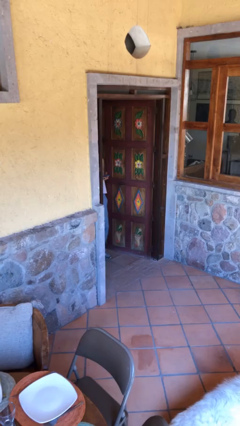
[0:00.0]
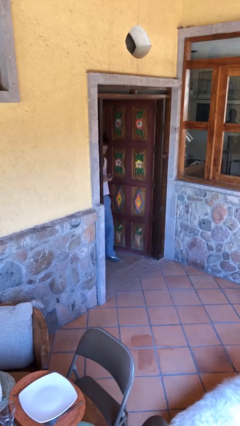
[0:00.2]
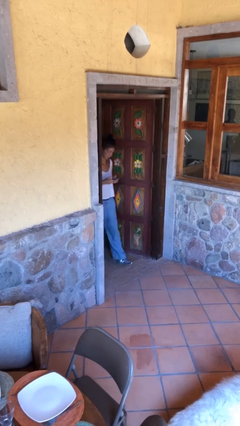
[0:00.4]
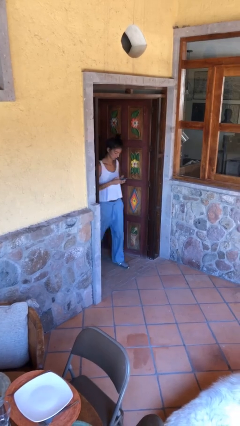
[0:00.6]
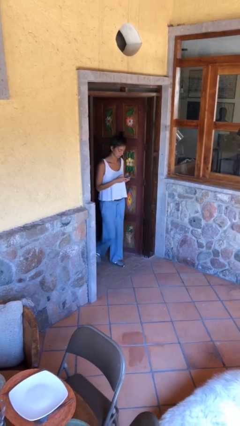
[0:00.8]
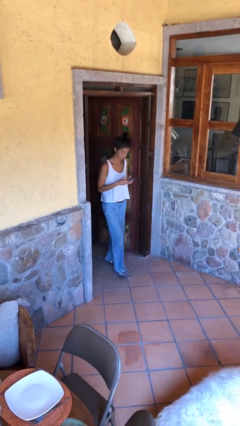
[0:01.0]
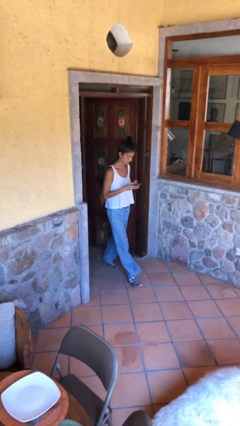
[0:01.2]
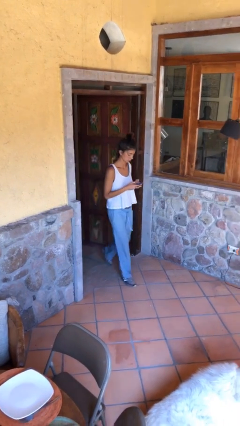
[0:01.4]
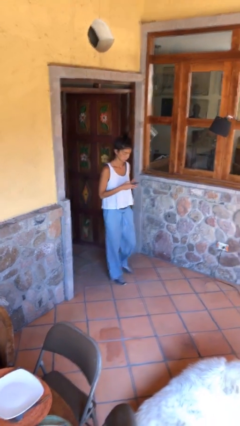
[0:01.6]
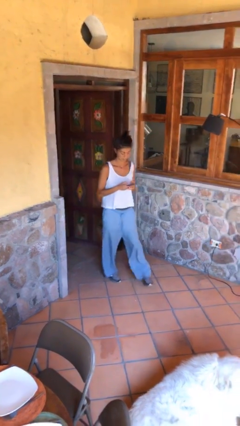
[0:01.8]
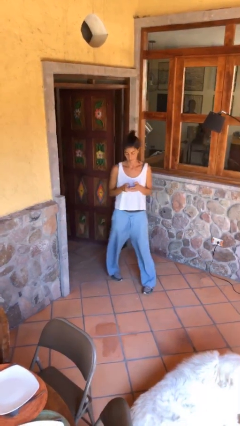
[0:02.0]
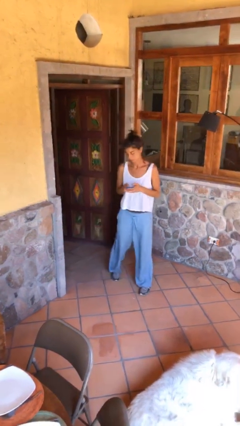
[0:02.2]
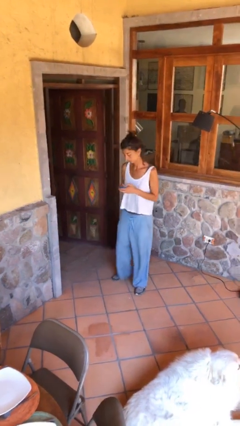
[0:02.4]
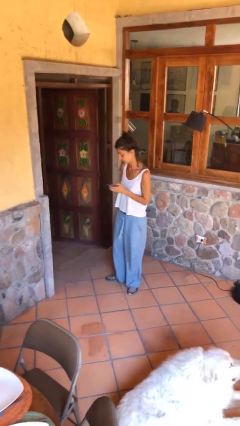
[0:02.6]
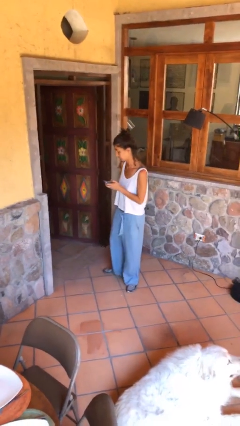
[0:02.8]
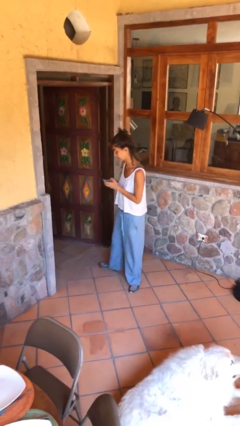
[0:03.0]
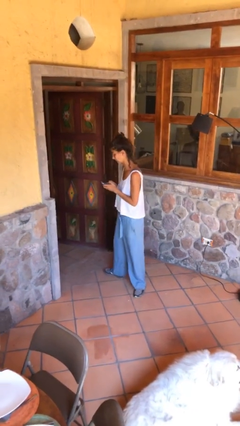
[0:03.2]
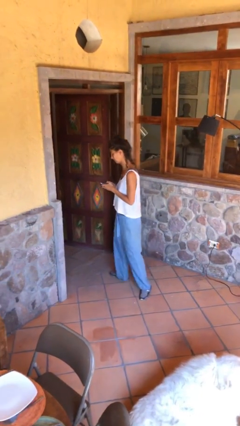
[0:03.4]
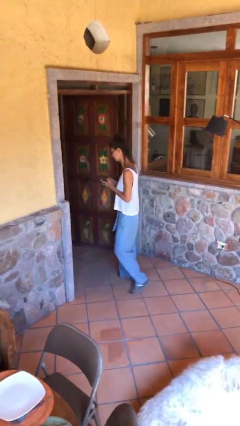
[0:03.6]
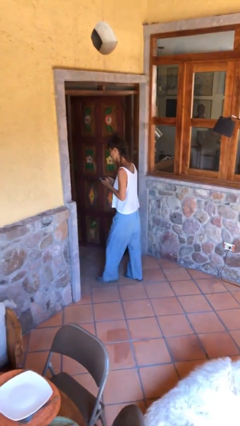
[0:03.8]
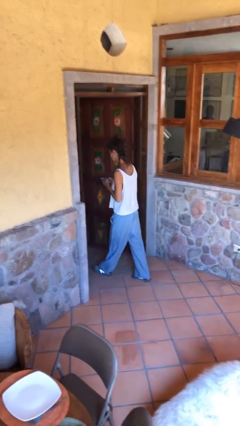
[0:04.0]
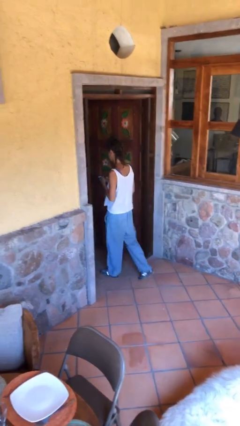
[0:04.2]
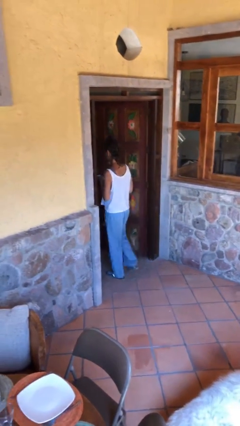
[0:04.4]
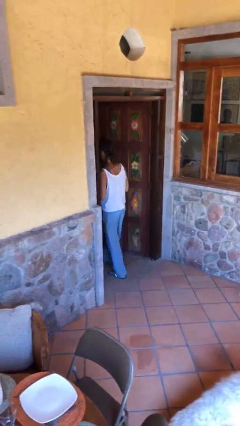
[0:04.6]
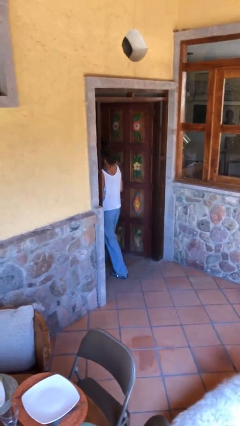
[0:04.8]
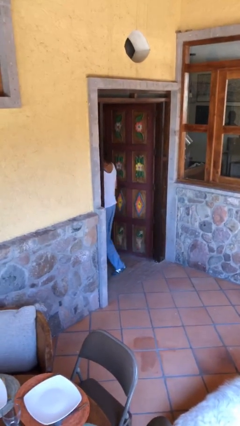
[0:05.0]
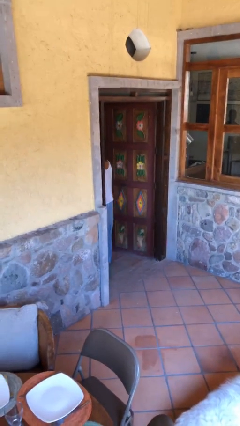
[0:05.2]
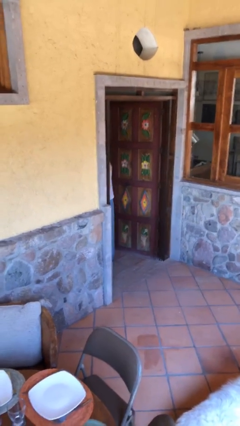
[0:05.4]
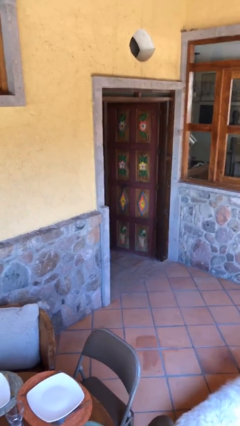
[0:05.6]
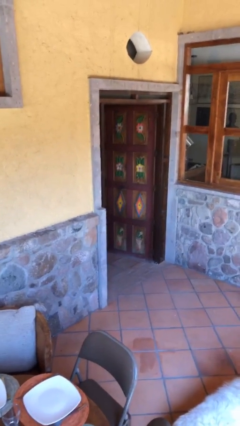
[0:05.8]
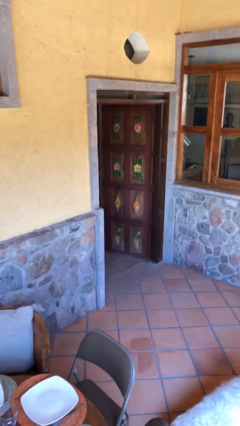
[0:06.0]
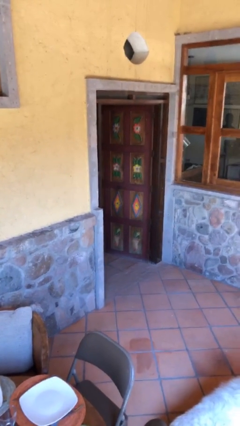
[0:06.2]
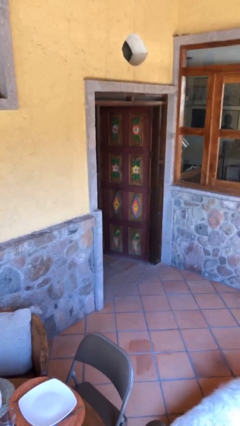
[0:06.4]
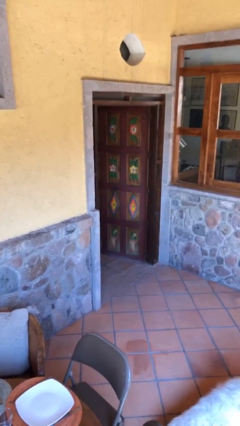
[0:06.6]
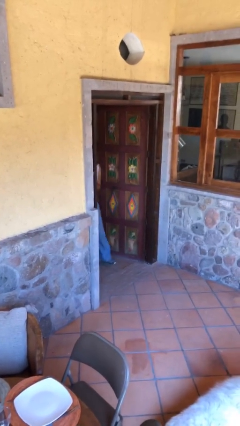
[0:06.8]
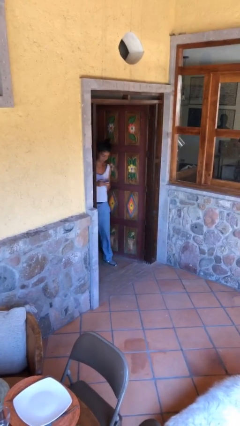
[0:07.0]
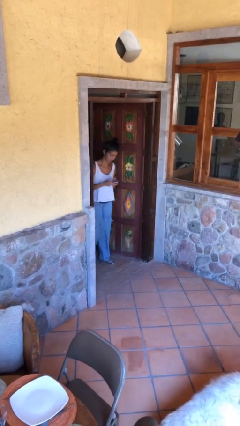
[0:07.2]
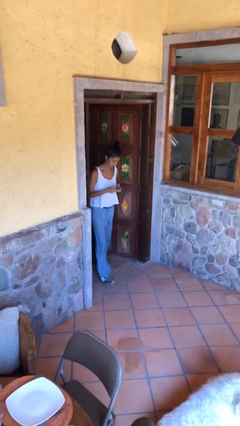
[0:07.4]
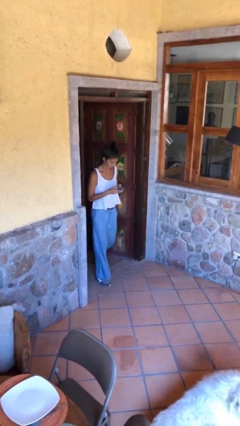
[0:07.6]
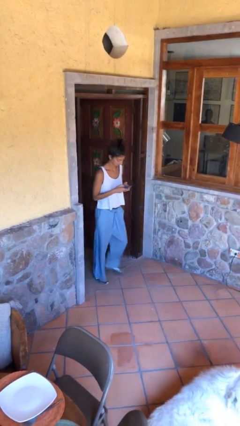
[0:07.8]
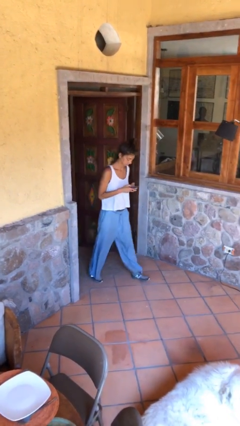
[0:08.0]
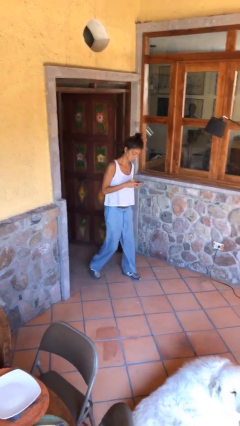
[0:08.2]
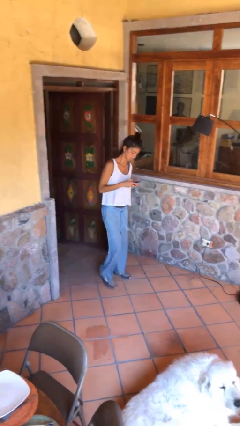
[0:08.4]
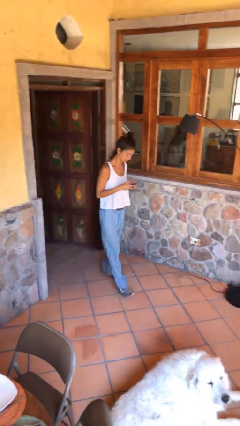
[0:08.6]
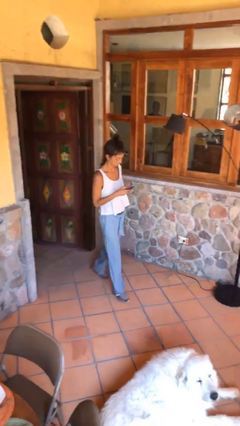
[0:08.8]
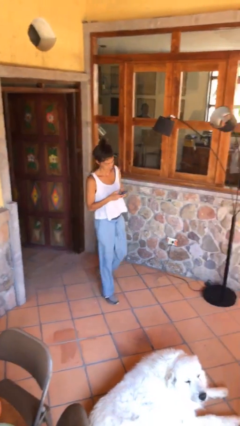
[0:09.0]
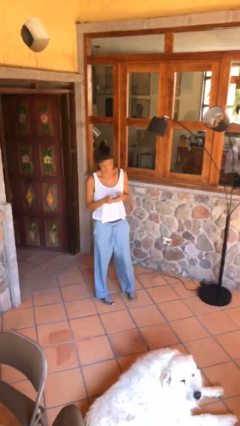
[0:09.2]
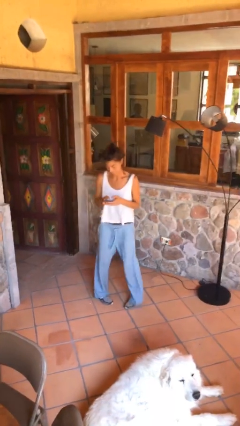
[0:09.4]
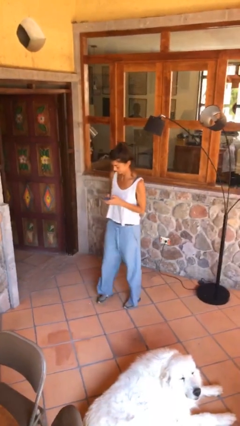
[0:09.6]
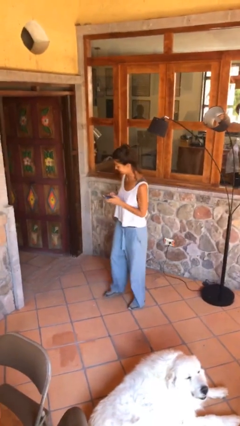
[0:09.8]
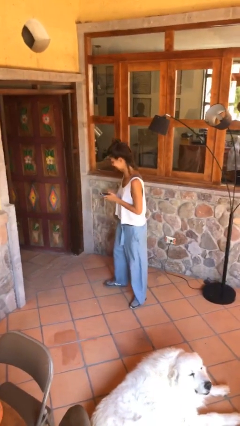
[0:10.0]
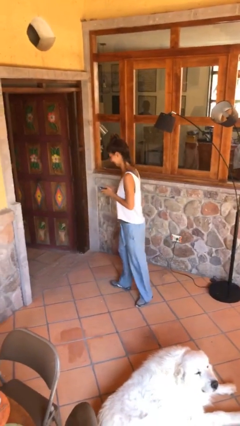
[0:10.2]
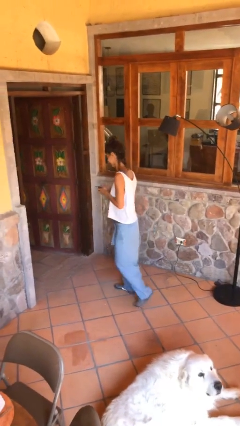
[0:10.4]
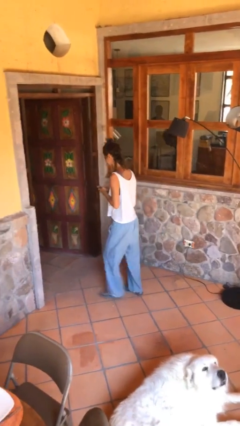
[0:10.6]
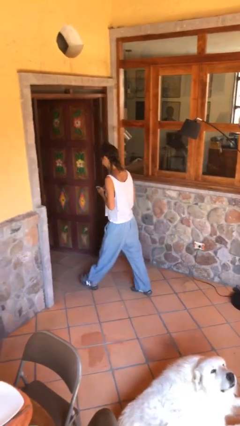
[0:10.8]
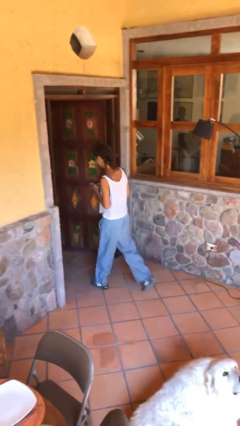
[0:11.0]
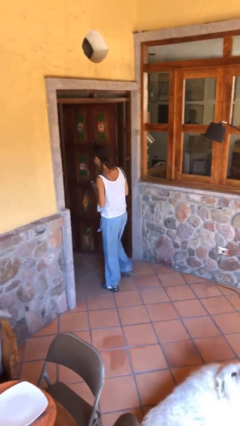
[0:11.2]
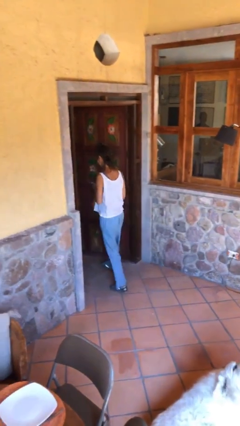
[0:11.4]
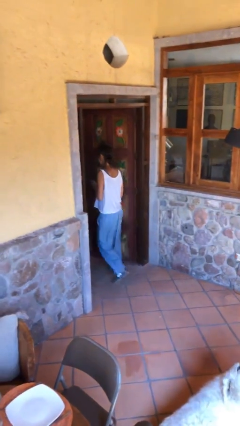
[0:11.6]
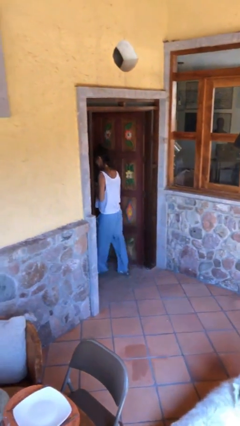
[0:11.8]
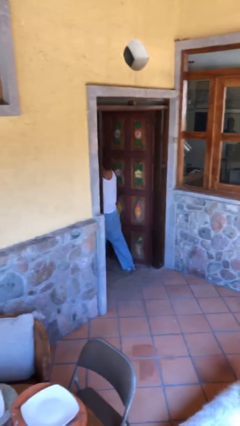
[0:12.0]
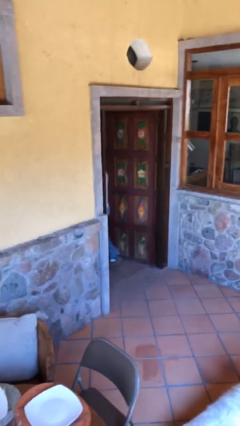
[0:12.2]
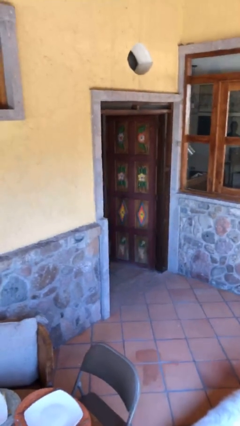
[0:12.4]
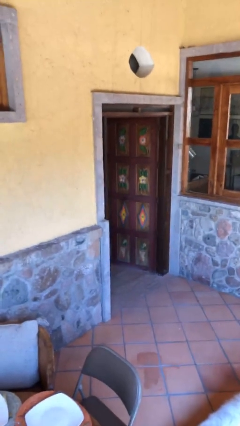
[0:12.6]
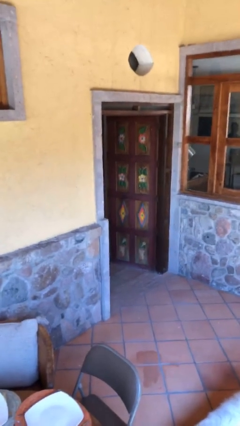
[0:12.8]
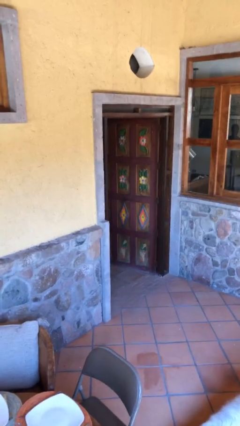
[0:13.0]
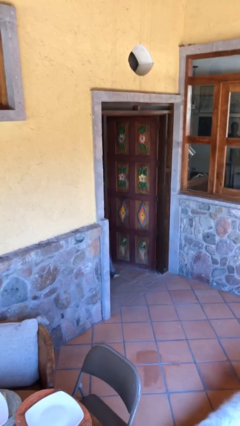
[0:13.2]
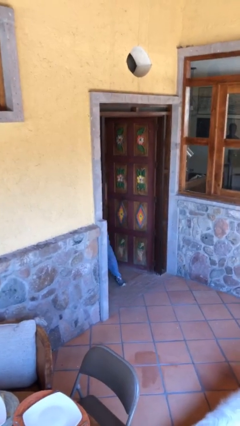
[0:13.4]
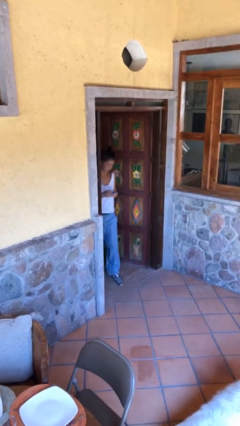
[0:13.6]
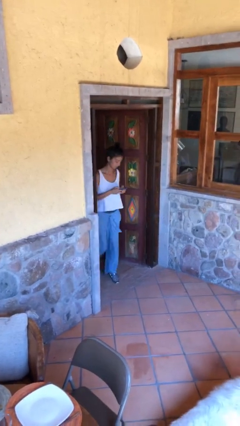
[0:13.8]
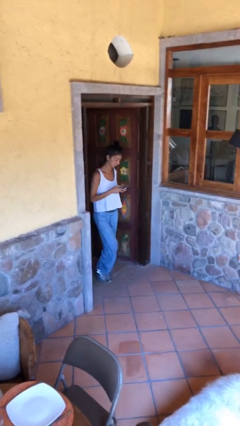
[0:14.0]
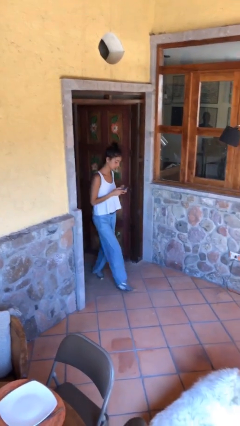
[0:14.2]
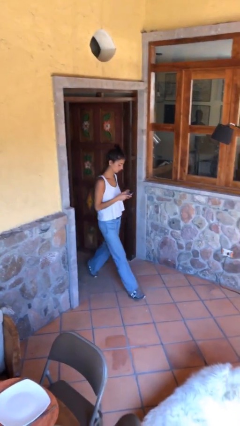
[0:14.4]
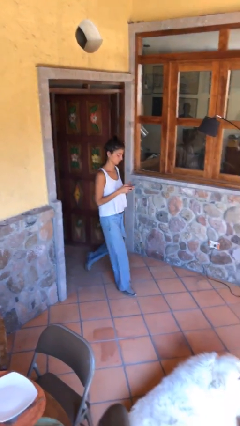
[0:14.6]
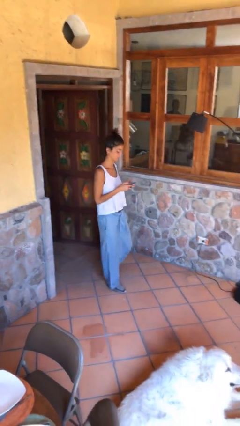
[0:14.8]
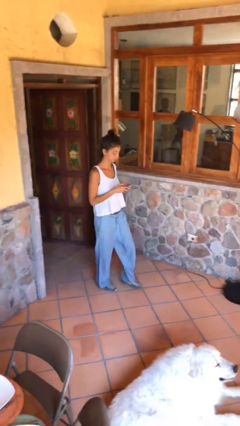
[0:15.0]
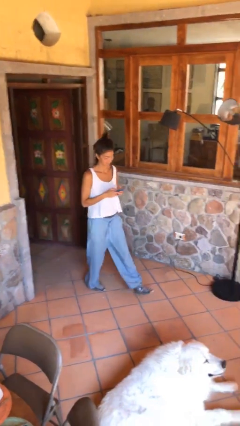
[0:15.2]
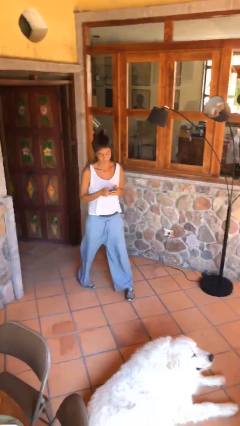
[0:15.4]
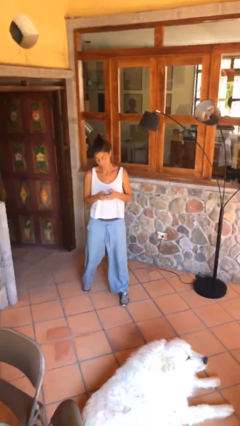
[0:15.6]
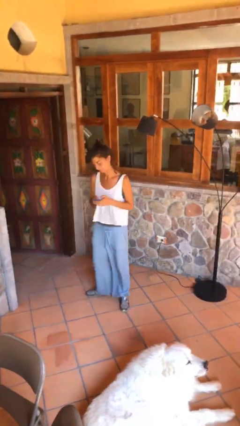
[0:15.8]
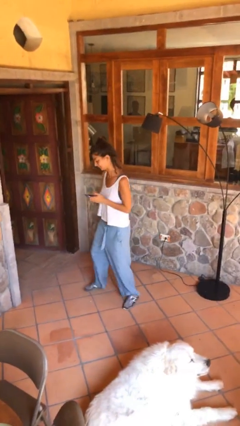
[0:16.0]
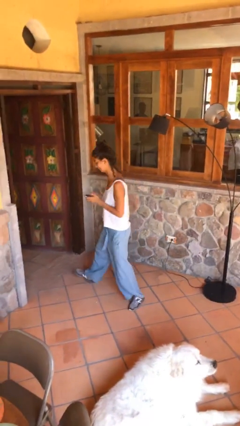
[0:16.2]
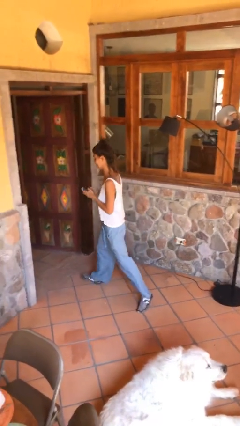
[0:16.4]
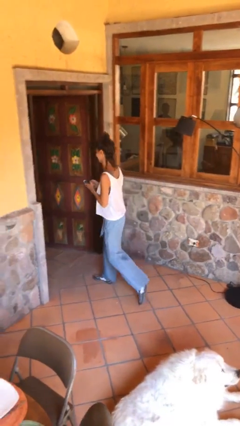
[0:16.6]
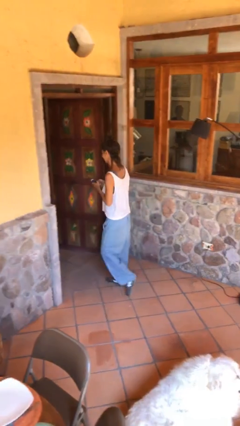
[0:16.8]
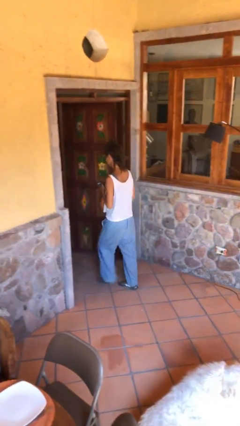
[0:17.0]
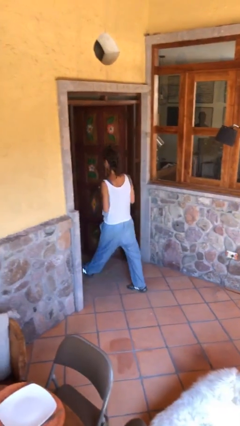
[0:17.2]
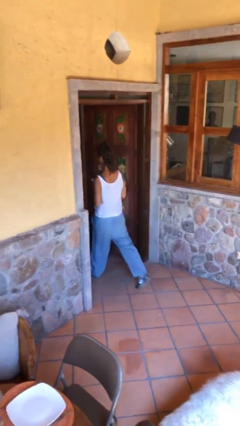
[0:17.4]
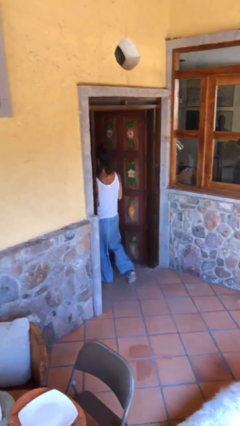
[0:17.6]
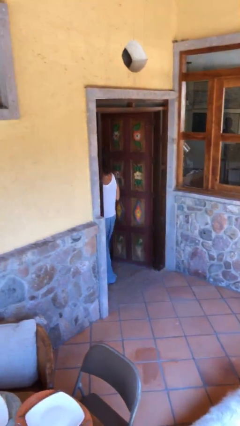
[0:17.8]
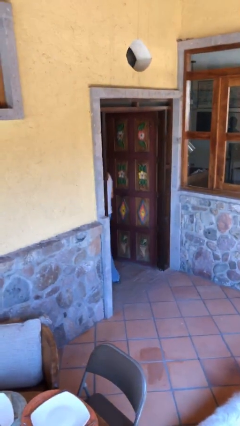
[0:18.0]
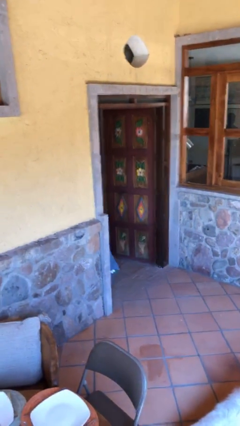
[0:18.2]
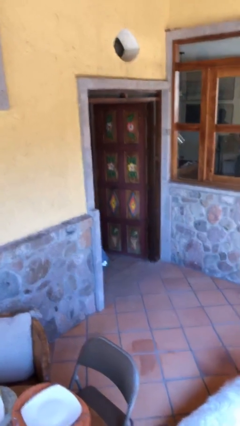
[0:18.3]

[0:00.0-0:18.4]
person texts on phone
